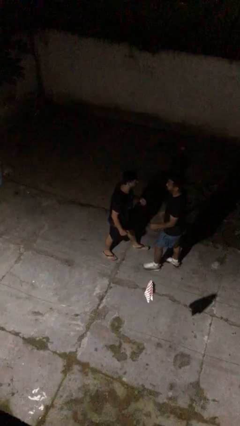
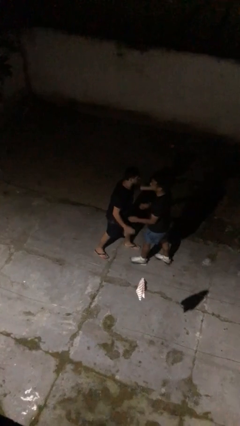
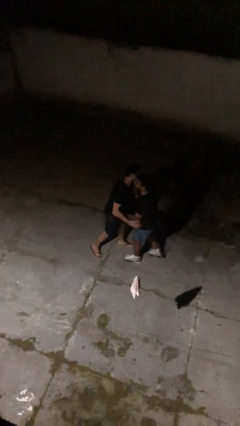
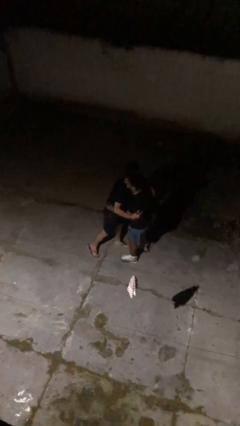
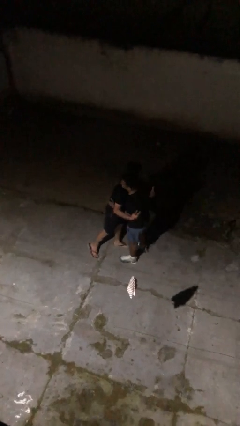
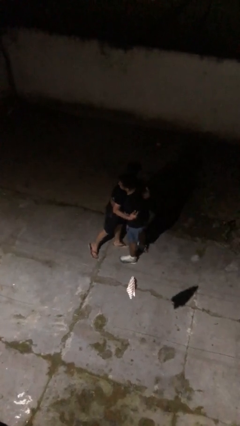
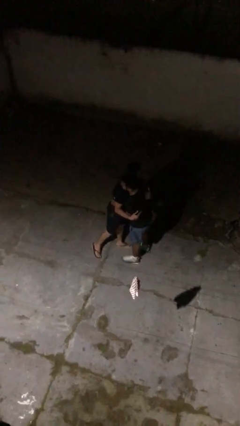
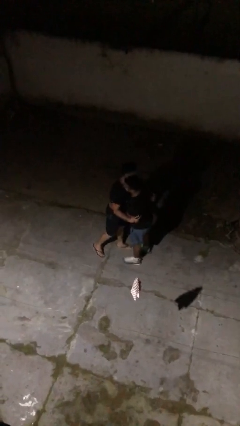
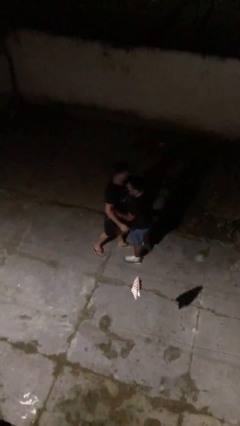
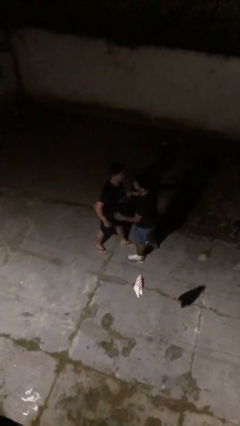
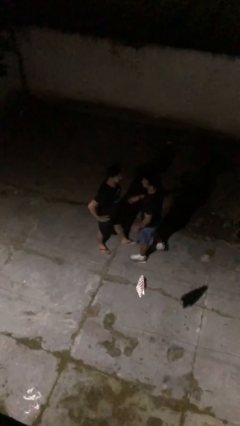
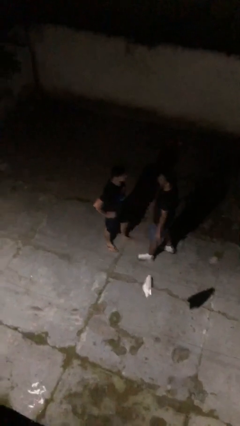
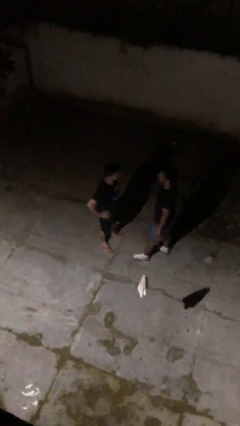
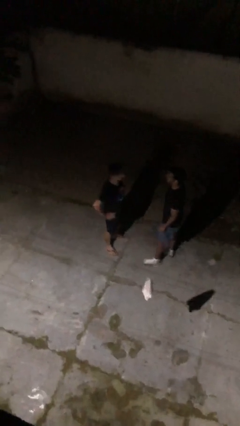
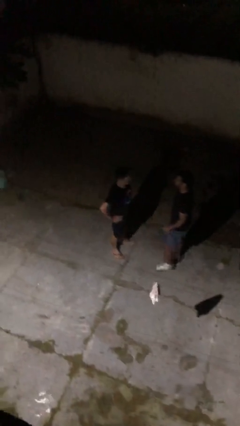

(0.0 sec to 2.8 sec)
person embraces person

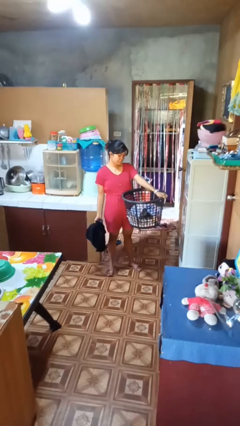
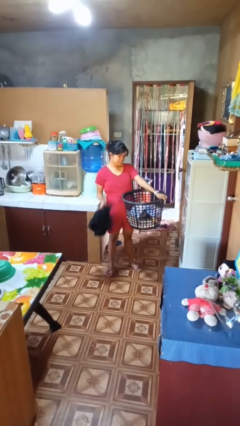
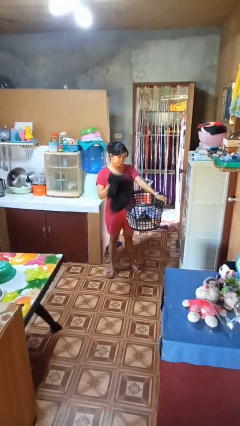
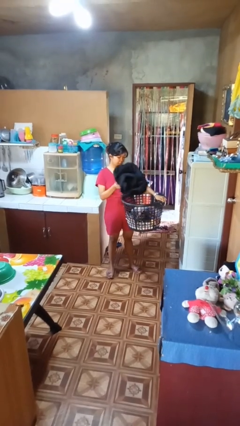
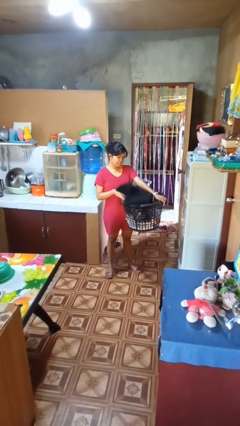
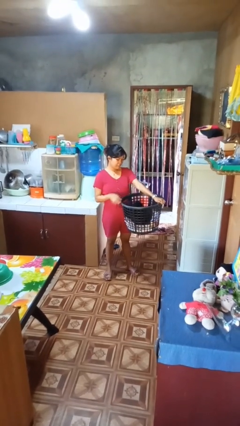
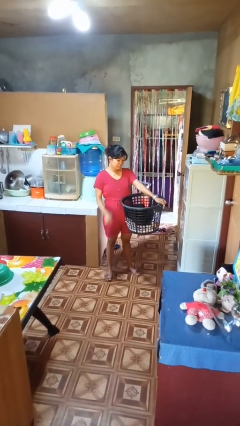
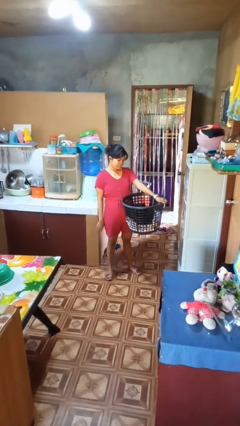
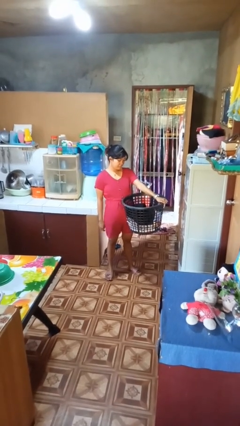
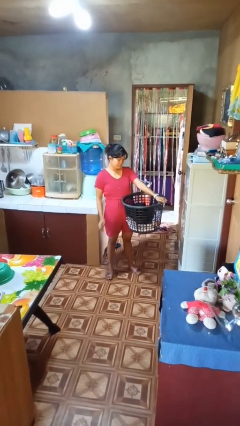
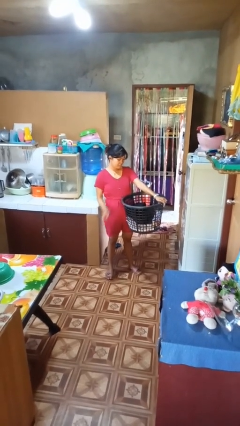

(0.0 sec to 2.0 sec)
person puts object into basket

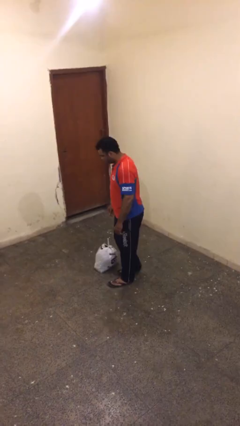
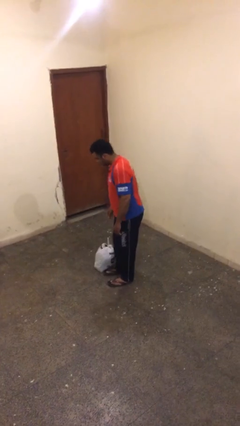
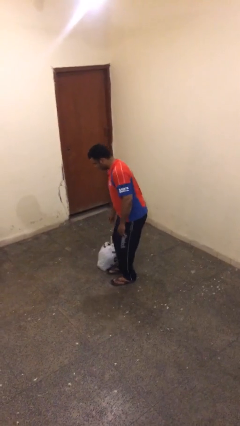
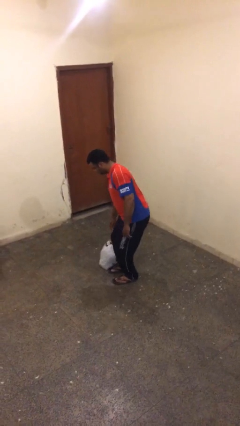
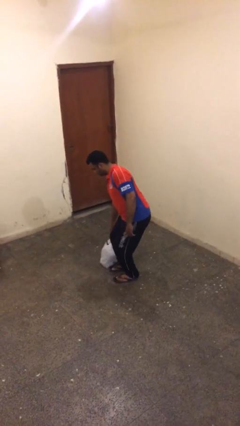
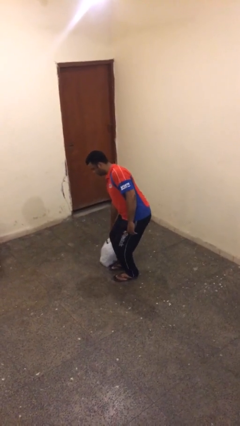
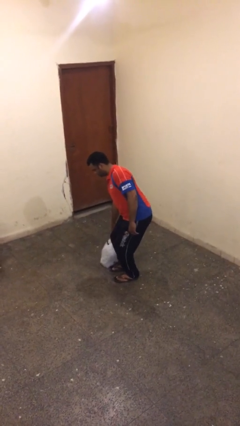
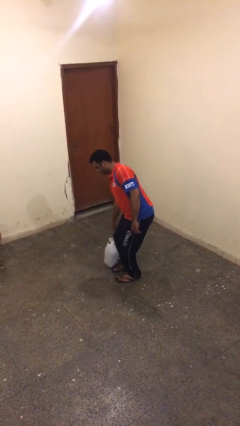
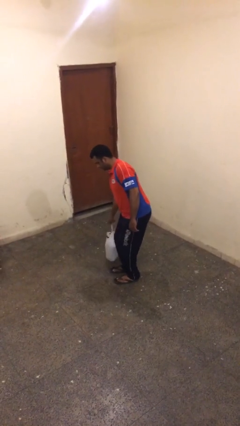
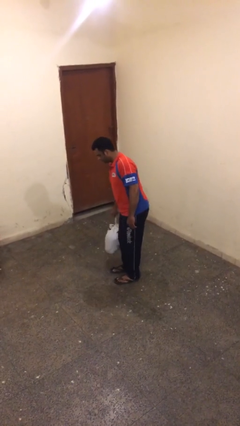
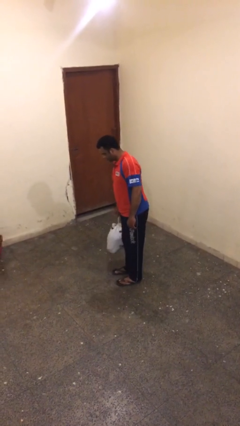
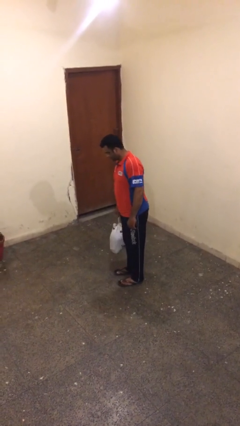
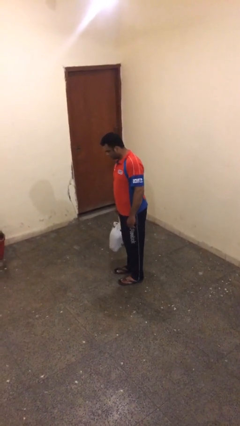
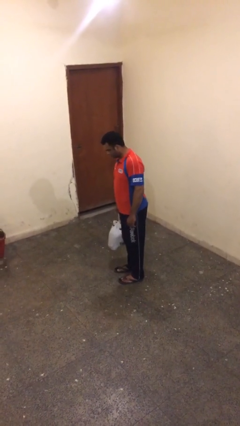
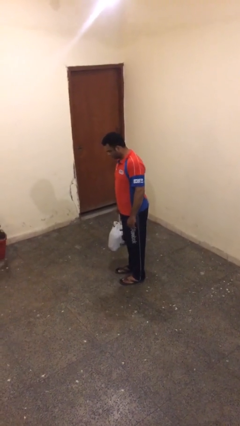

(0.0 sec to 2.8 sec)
person picks up object from floor

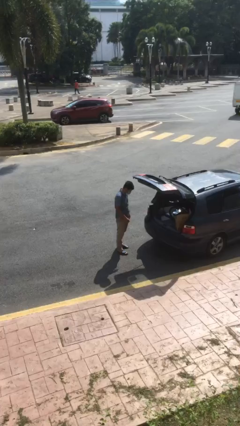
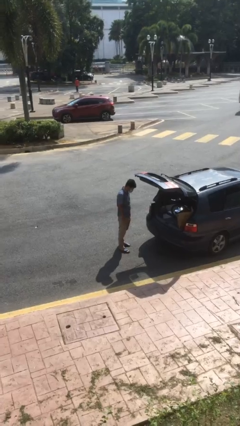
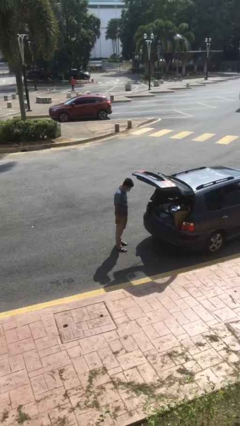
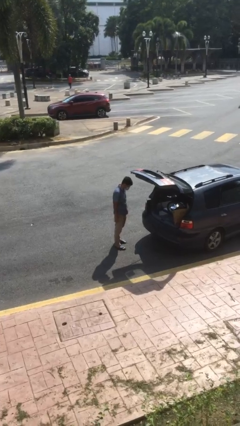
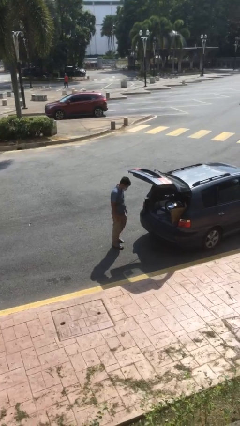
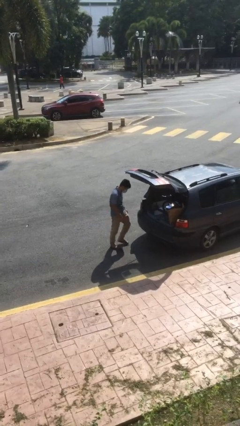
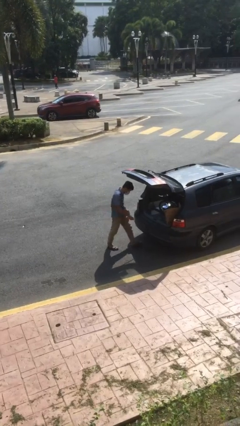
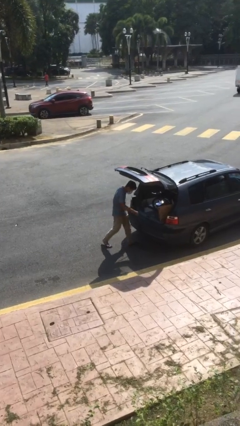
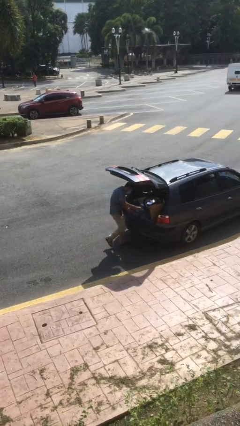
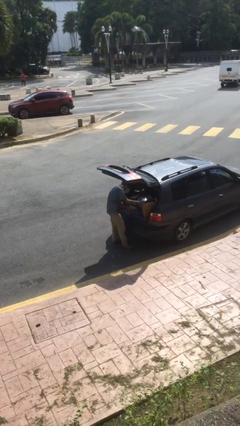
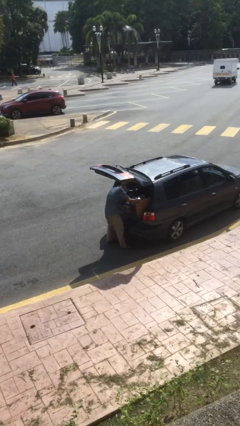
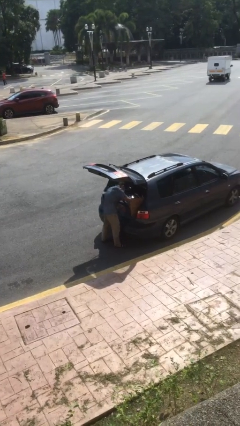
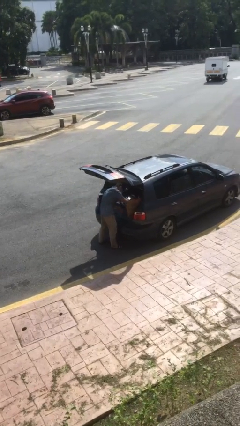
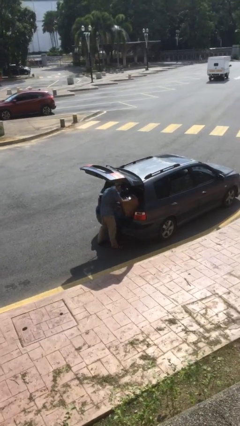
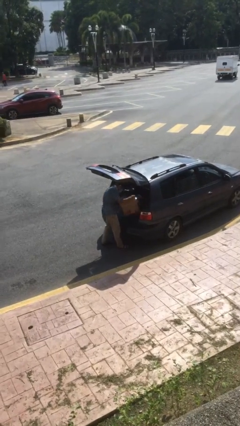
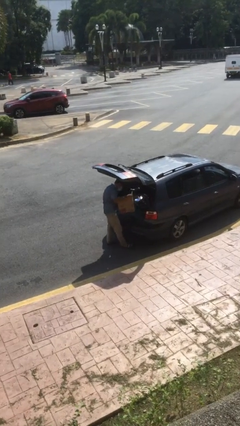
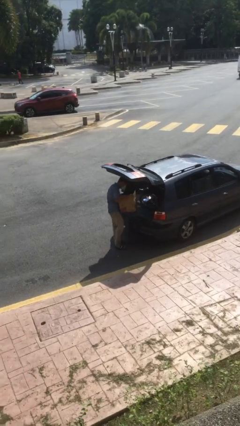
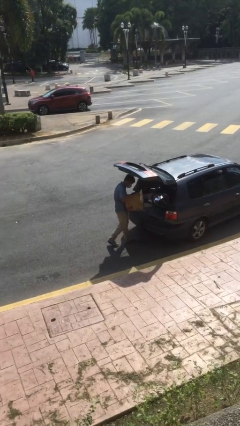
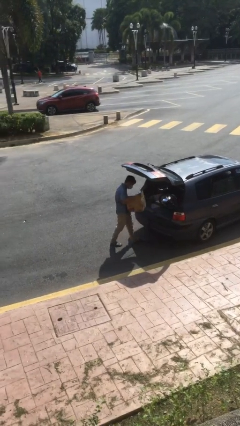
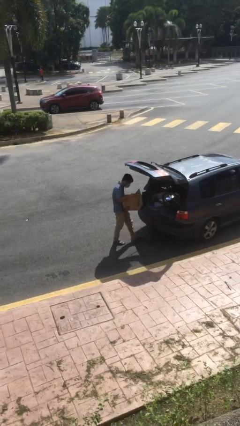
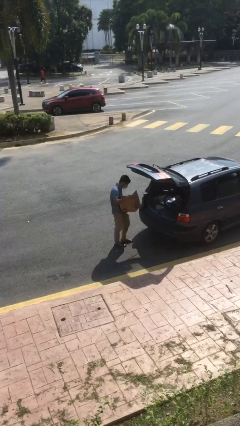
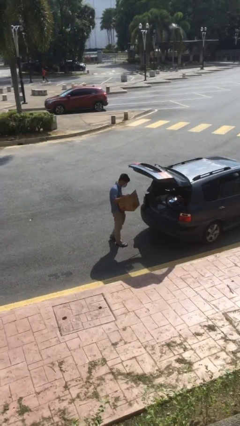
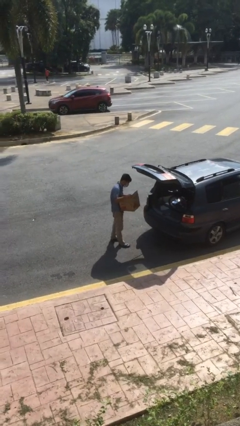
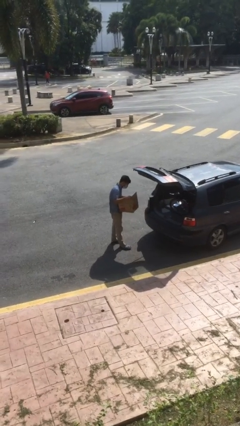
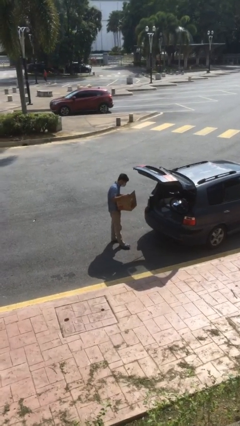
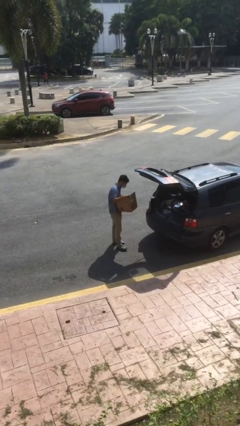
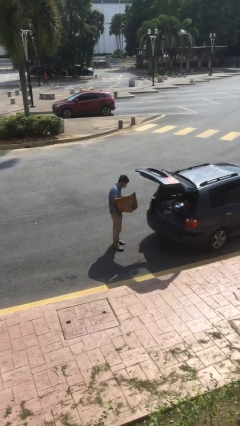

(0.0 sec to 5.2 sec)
person unloads car

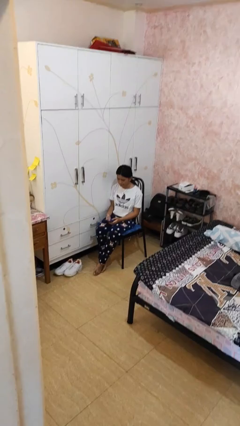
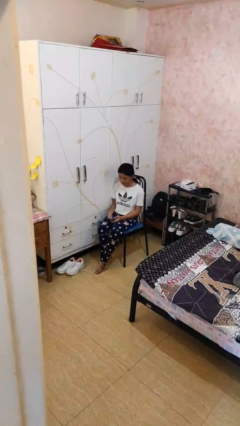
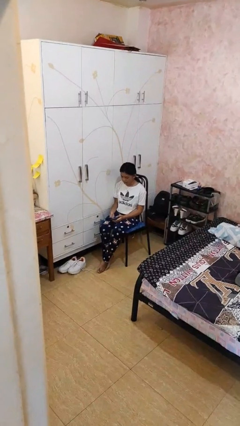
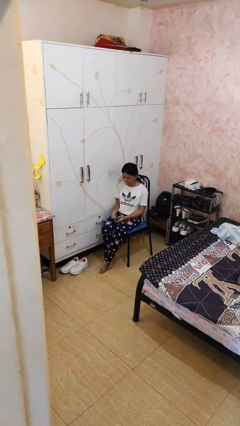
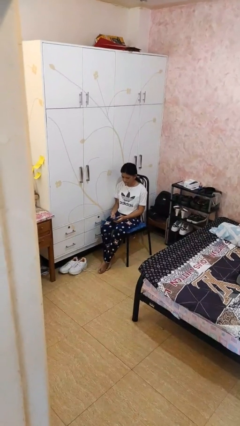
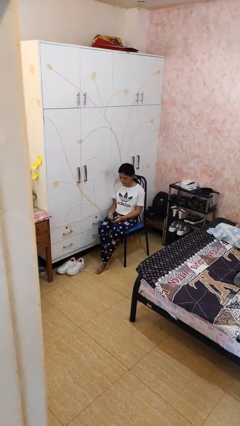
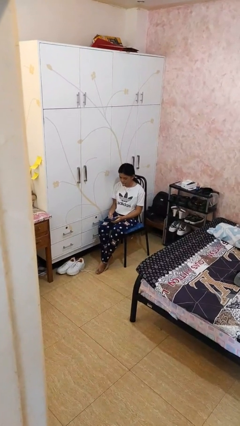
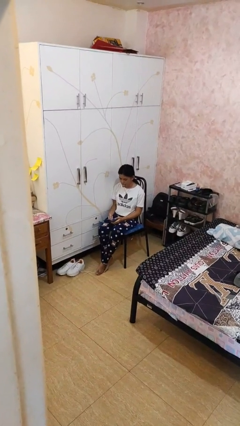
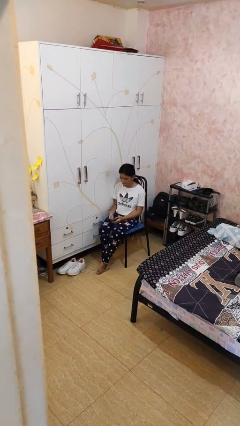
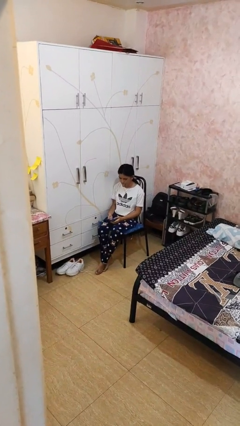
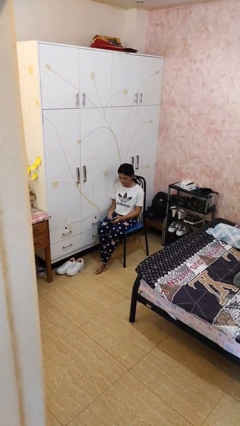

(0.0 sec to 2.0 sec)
person sticks out tongue

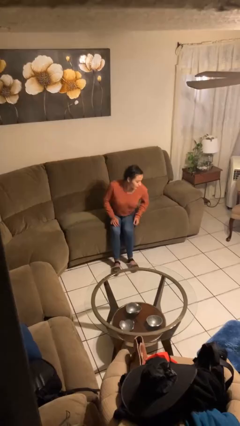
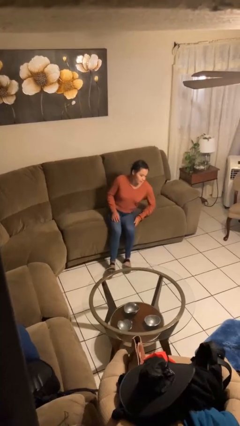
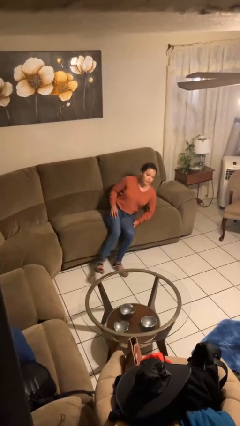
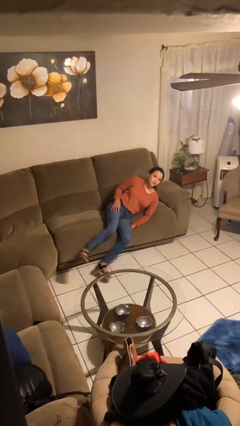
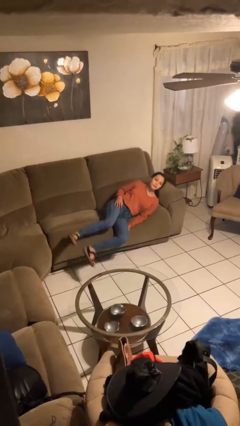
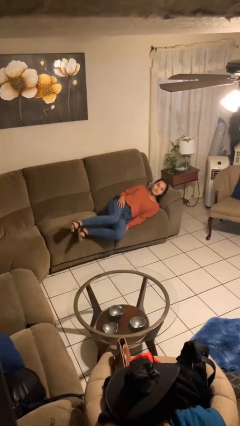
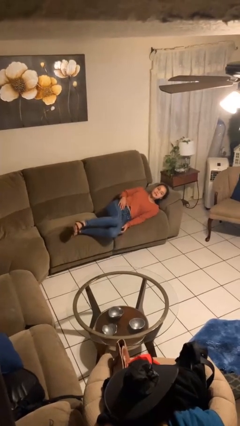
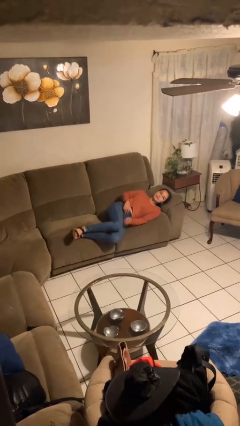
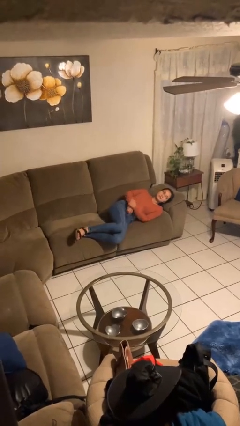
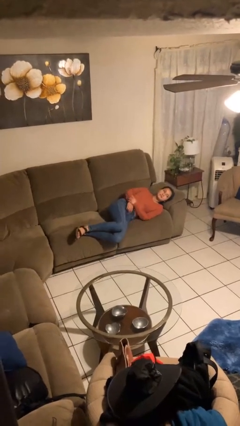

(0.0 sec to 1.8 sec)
person lies down on couch

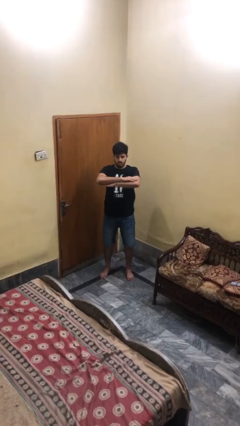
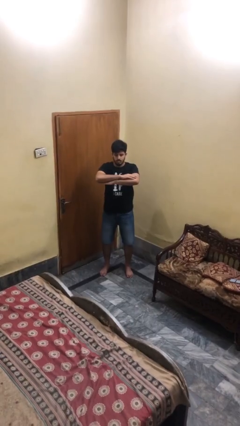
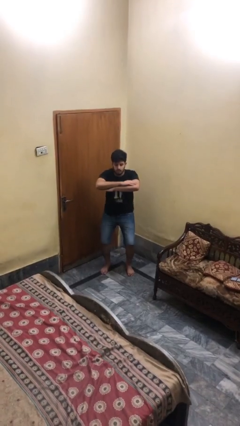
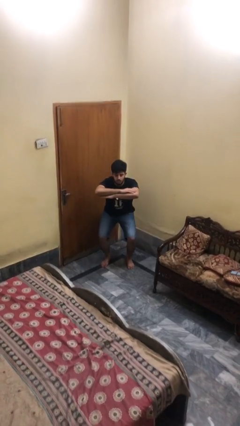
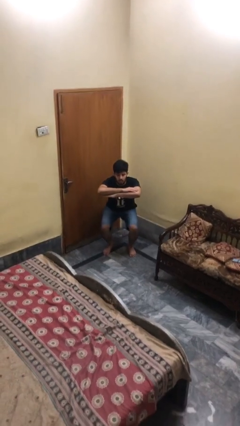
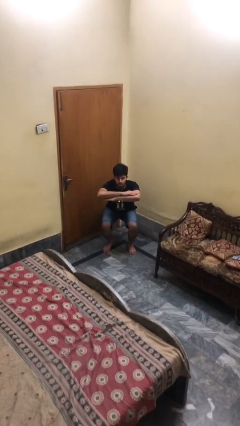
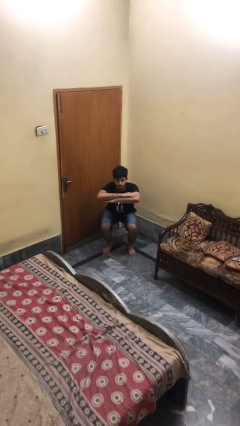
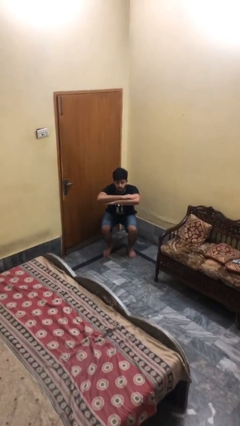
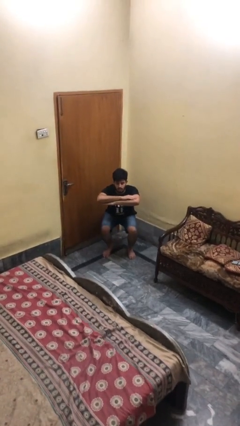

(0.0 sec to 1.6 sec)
person squats
